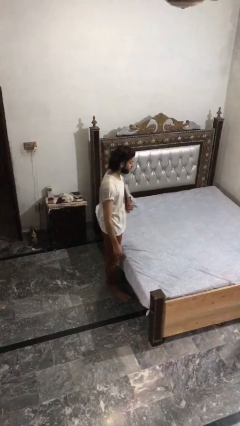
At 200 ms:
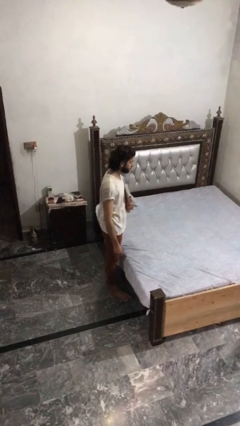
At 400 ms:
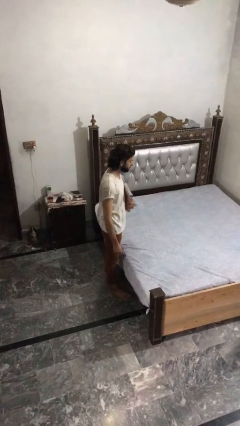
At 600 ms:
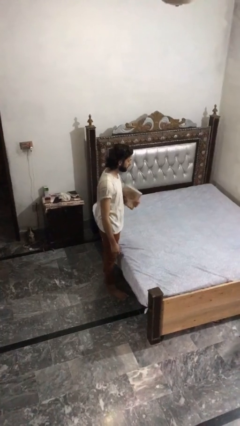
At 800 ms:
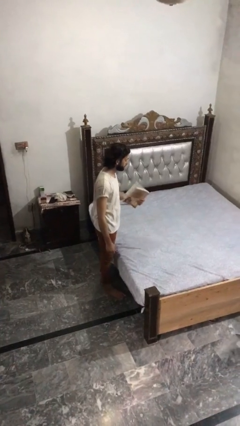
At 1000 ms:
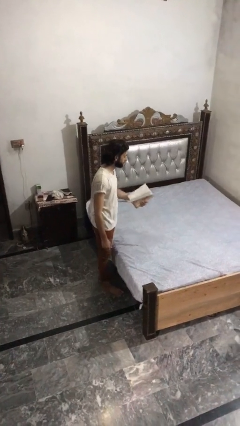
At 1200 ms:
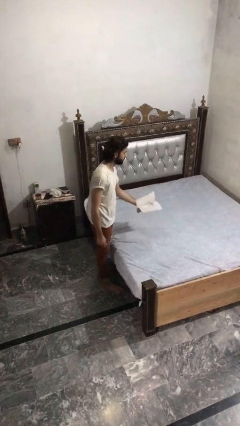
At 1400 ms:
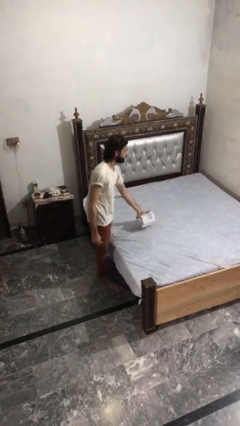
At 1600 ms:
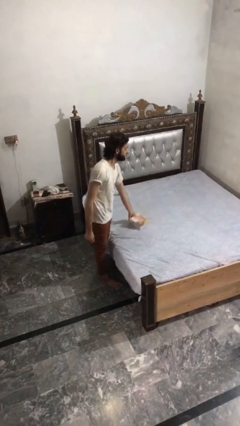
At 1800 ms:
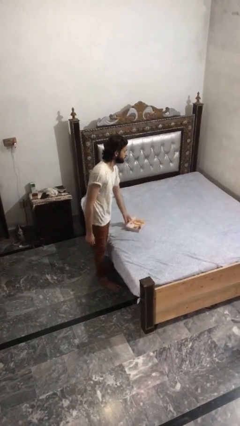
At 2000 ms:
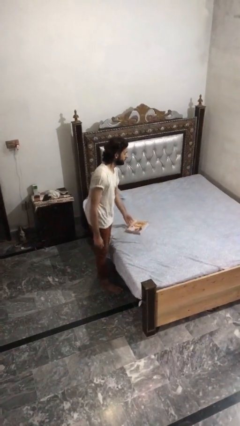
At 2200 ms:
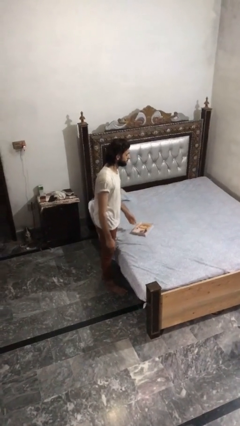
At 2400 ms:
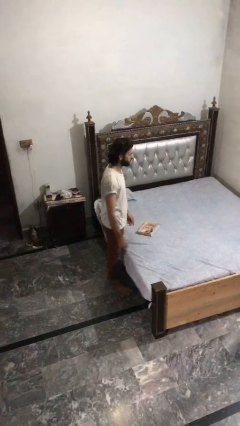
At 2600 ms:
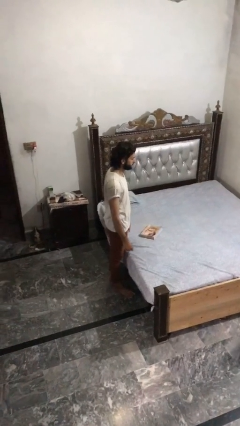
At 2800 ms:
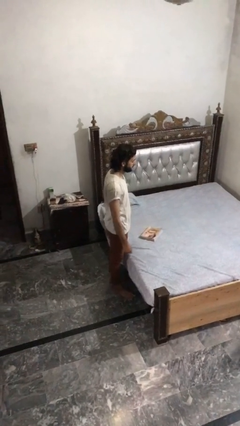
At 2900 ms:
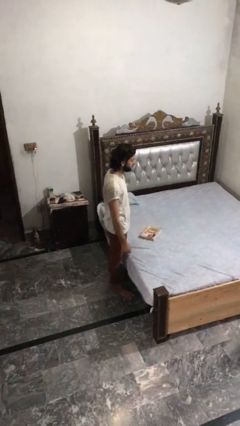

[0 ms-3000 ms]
person puts down object on bed

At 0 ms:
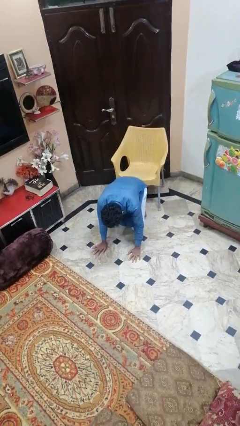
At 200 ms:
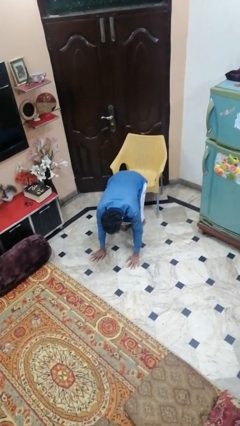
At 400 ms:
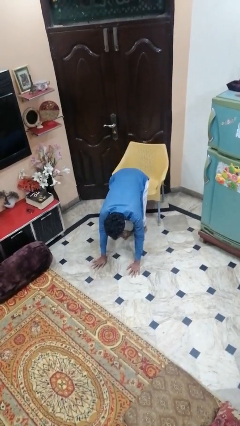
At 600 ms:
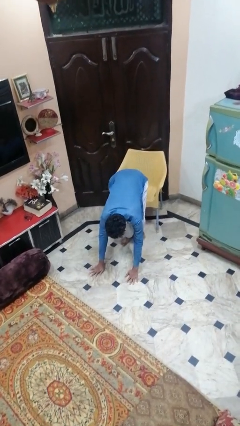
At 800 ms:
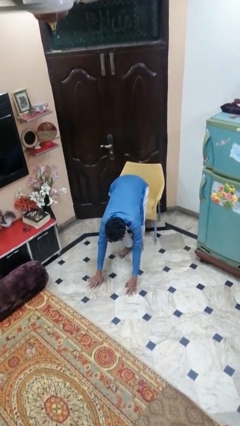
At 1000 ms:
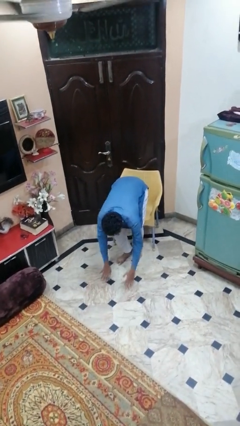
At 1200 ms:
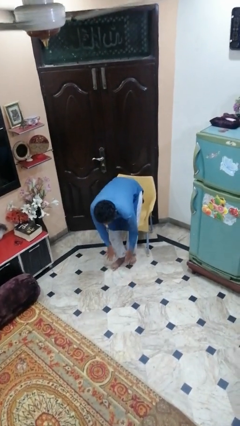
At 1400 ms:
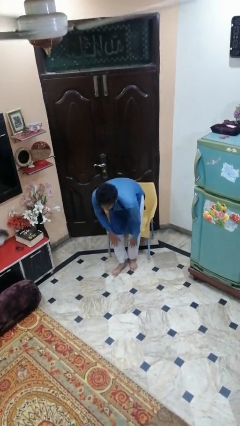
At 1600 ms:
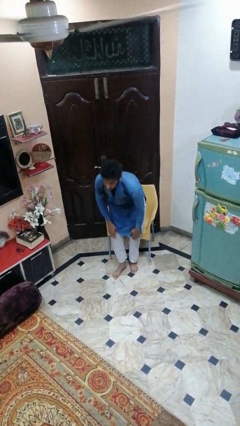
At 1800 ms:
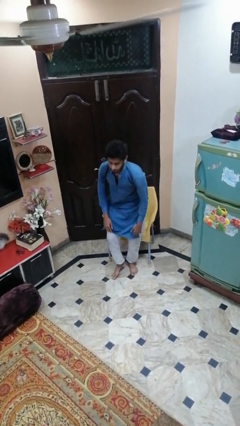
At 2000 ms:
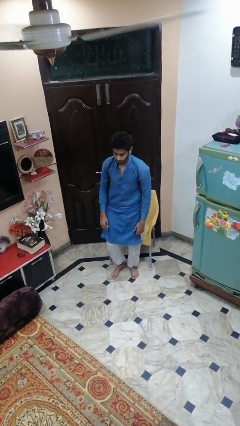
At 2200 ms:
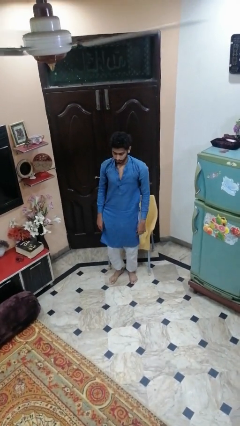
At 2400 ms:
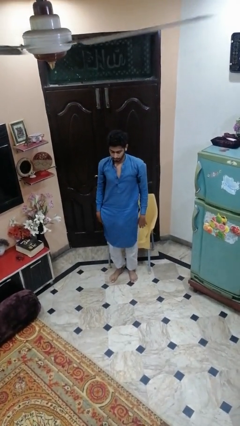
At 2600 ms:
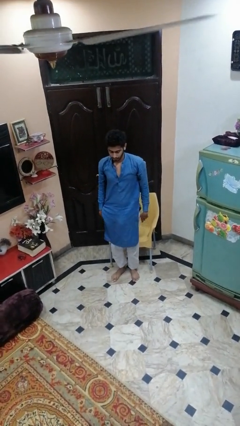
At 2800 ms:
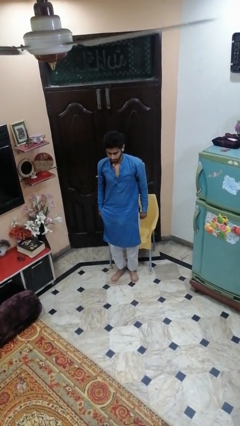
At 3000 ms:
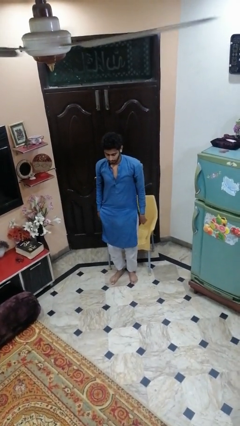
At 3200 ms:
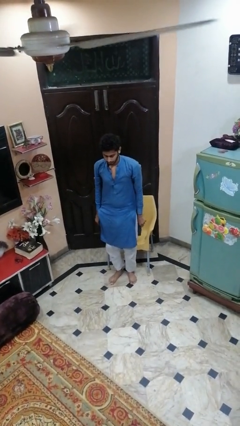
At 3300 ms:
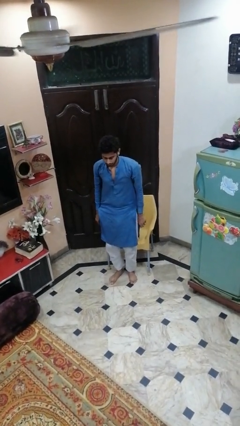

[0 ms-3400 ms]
person stands up from floor

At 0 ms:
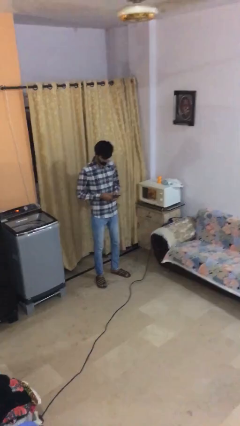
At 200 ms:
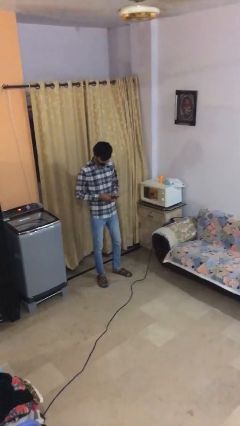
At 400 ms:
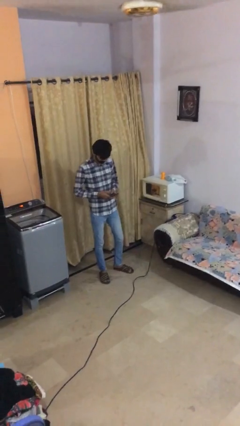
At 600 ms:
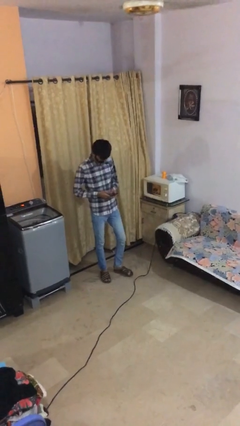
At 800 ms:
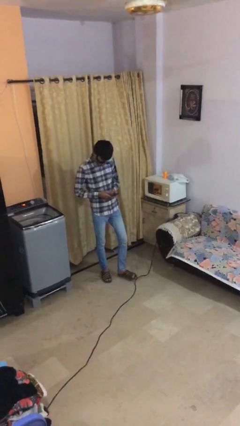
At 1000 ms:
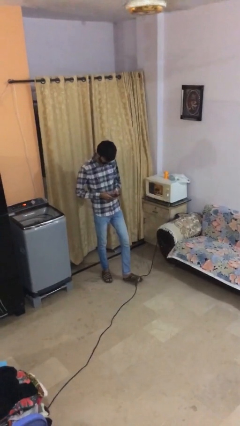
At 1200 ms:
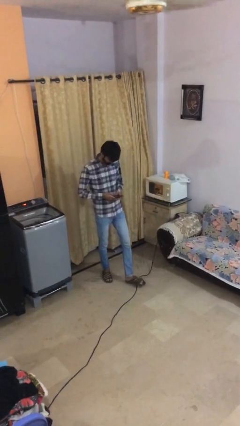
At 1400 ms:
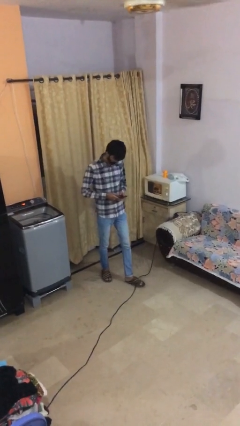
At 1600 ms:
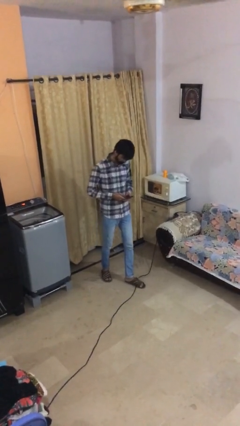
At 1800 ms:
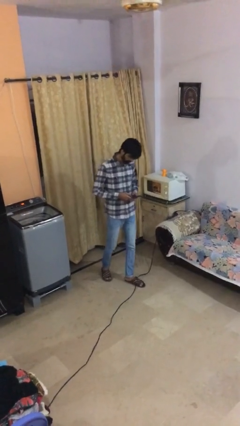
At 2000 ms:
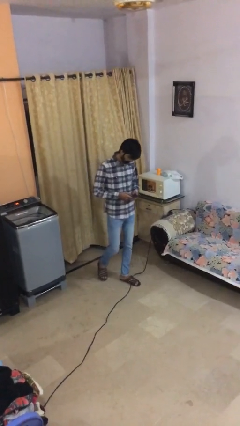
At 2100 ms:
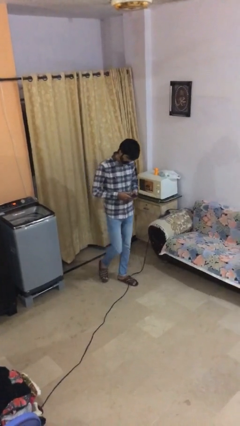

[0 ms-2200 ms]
person texts on phone

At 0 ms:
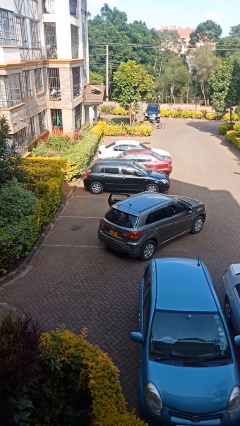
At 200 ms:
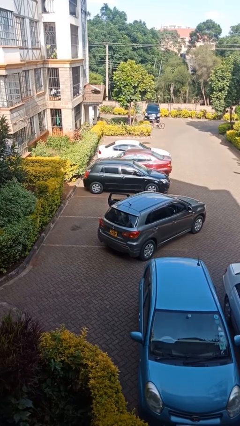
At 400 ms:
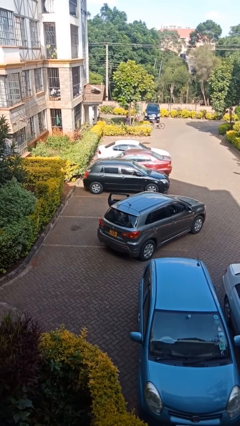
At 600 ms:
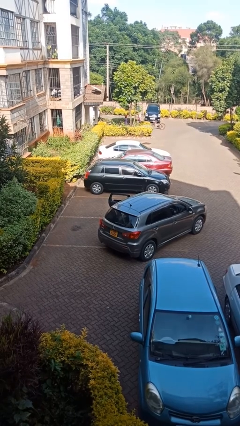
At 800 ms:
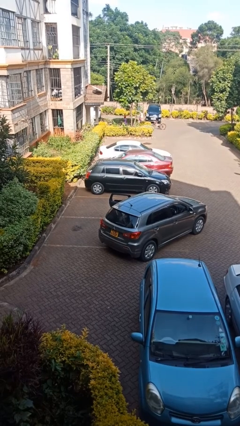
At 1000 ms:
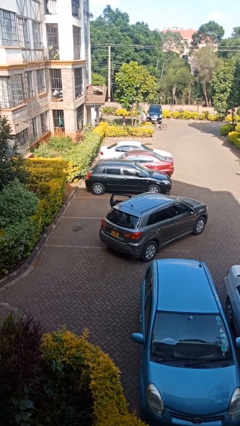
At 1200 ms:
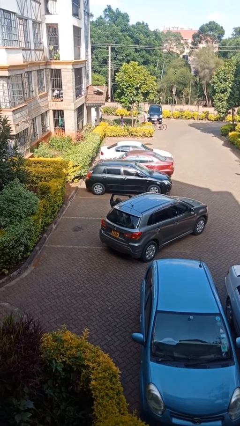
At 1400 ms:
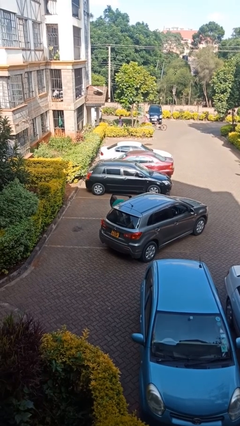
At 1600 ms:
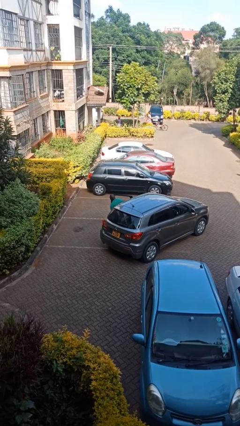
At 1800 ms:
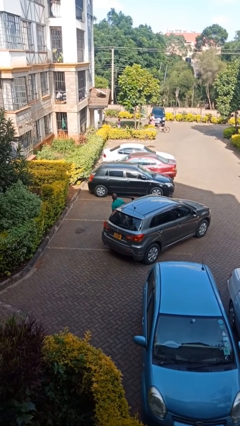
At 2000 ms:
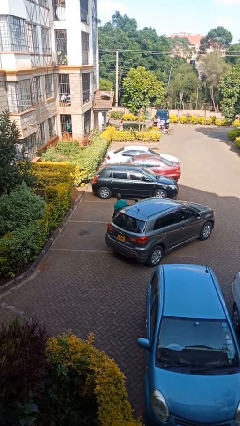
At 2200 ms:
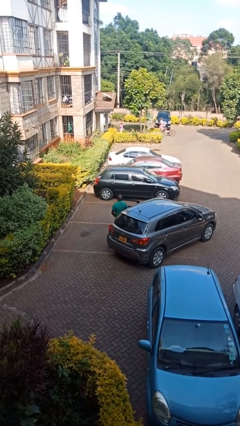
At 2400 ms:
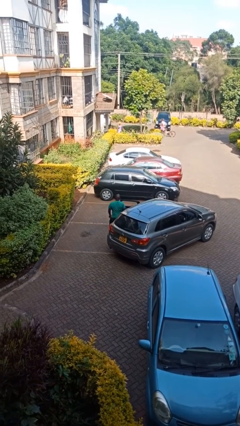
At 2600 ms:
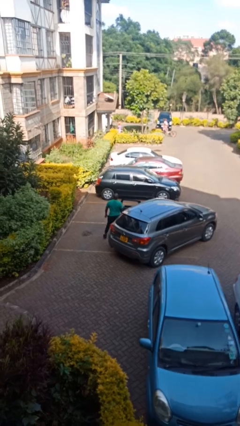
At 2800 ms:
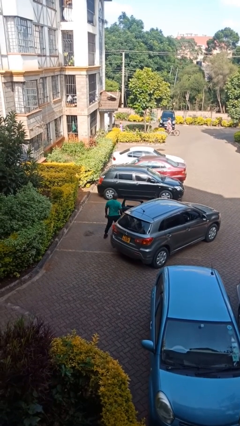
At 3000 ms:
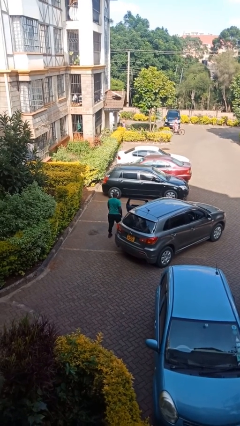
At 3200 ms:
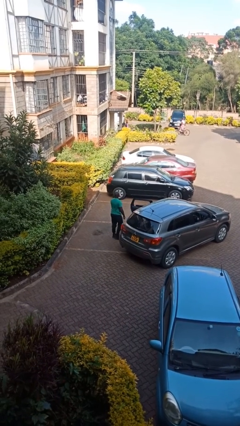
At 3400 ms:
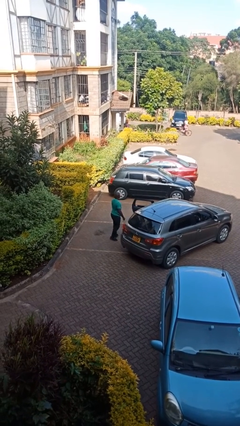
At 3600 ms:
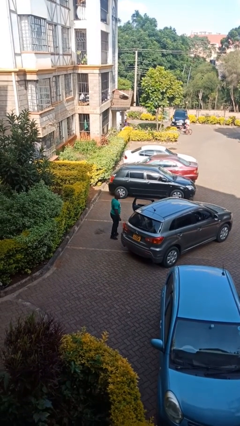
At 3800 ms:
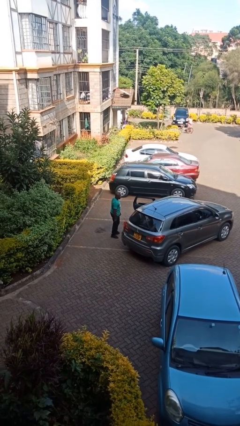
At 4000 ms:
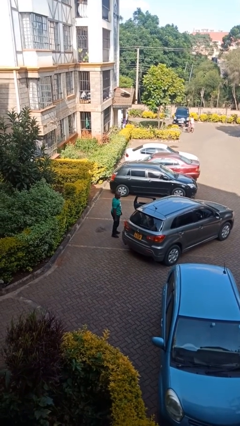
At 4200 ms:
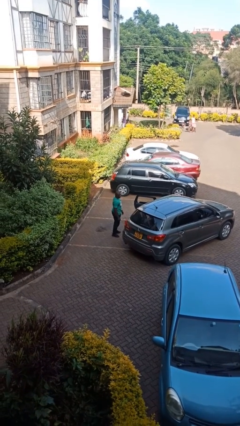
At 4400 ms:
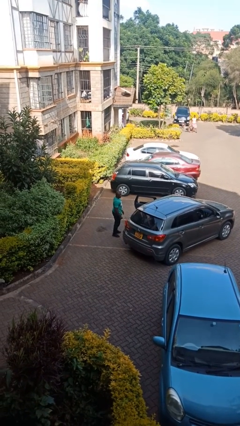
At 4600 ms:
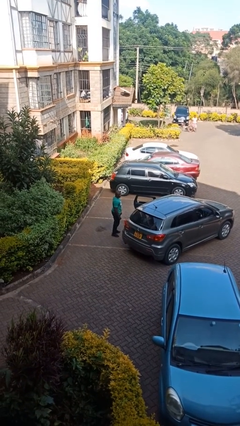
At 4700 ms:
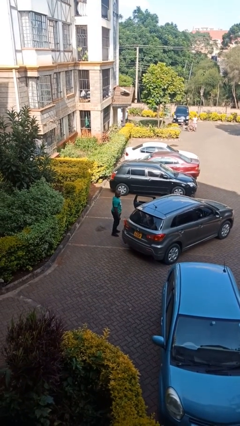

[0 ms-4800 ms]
person exits car

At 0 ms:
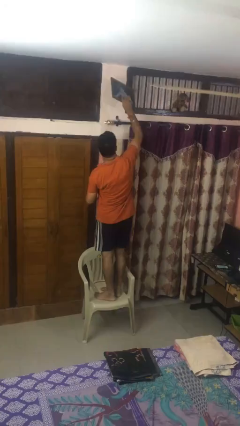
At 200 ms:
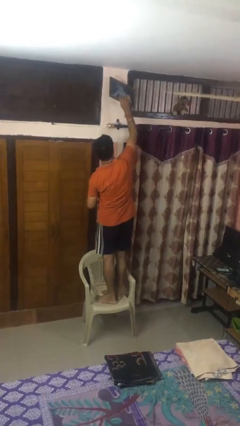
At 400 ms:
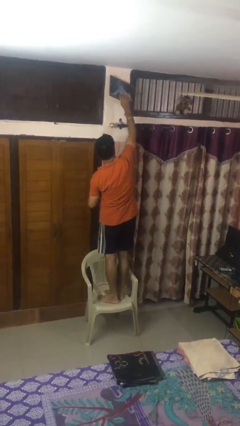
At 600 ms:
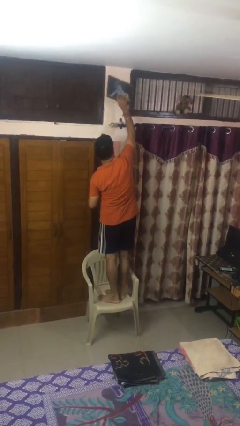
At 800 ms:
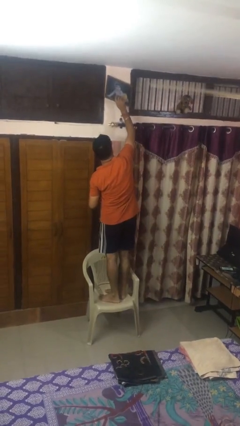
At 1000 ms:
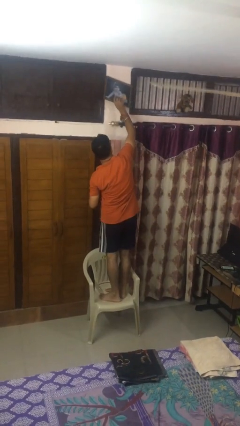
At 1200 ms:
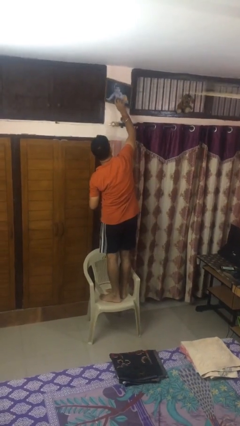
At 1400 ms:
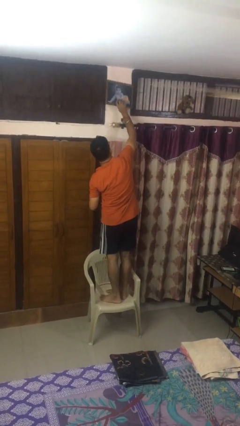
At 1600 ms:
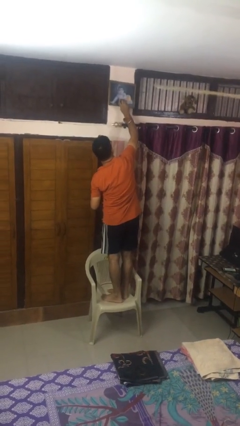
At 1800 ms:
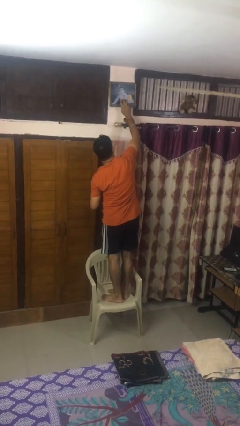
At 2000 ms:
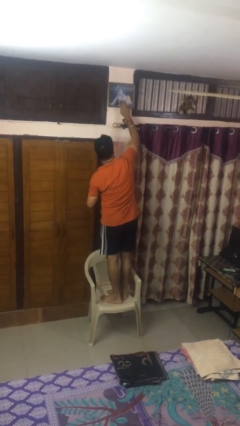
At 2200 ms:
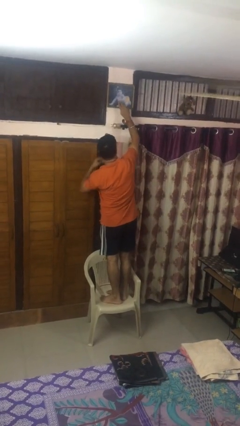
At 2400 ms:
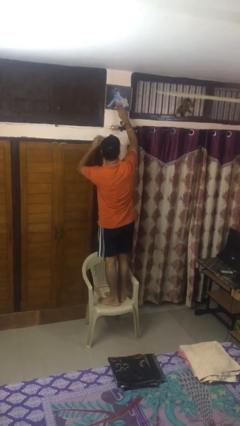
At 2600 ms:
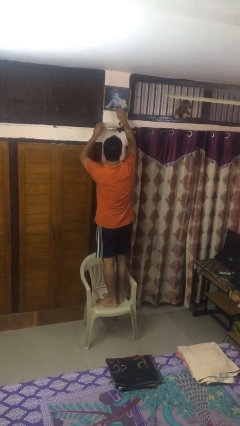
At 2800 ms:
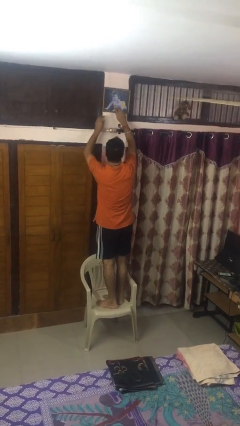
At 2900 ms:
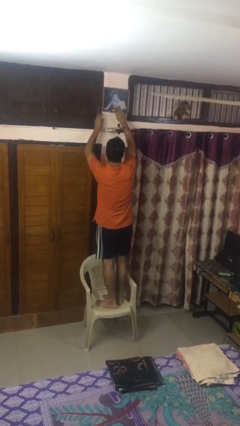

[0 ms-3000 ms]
person puts up picture frame

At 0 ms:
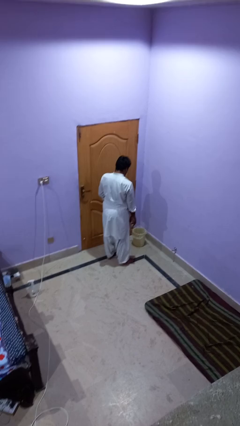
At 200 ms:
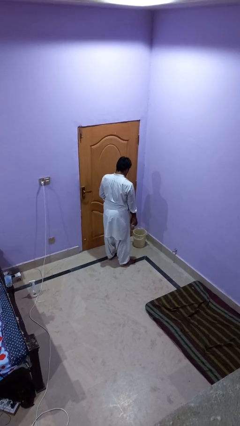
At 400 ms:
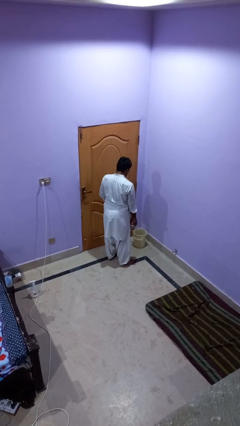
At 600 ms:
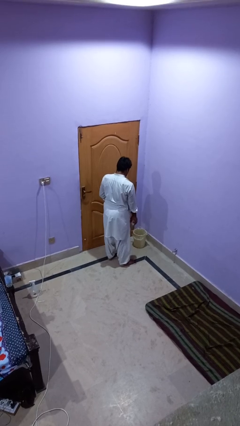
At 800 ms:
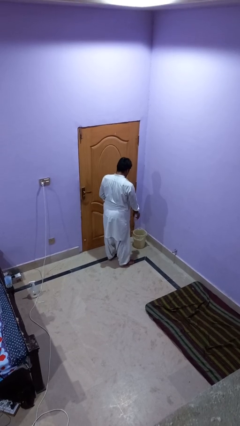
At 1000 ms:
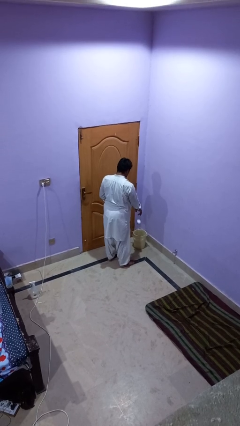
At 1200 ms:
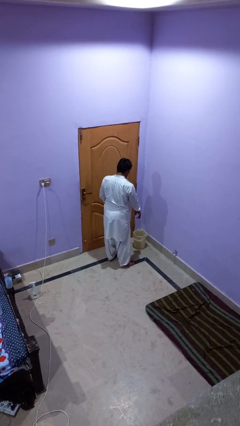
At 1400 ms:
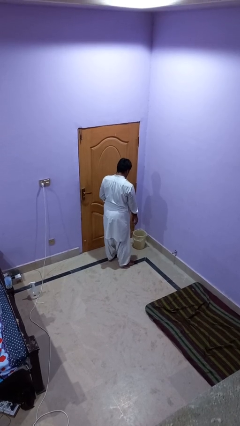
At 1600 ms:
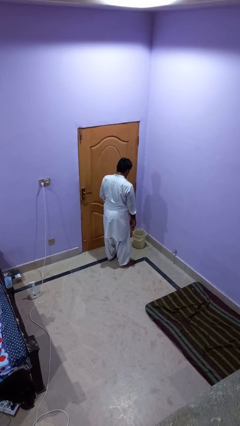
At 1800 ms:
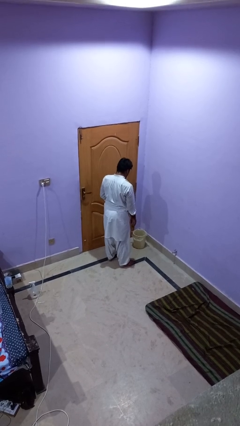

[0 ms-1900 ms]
person discards trash
